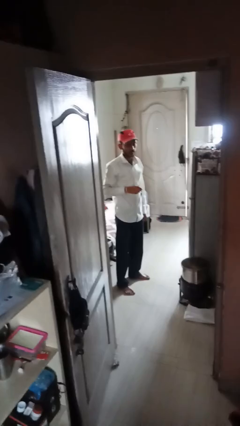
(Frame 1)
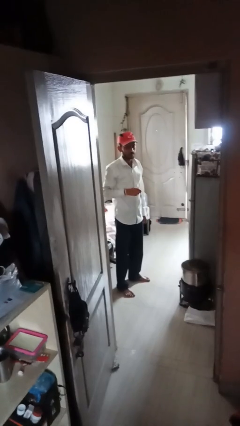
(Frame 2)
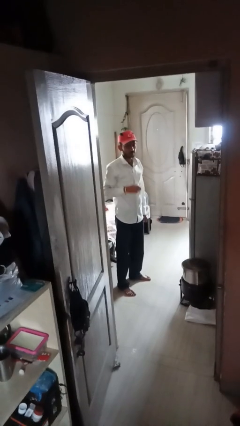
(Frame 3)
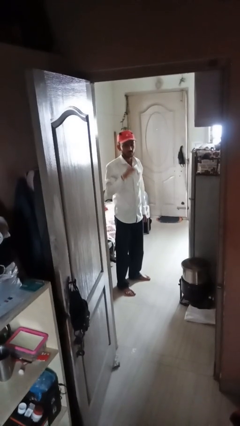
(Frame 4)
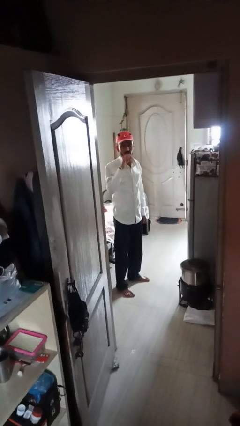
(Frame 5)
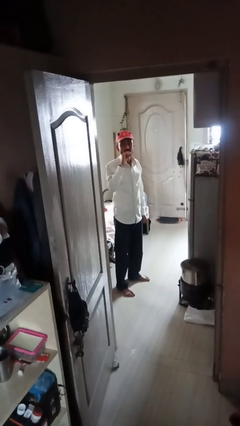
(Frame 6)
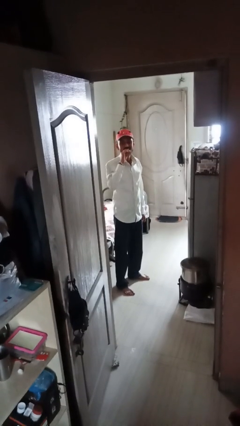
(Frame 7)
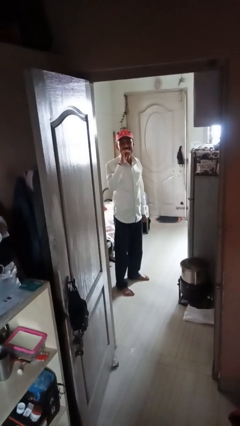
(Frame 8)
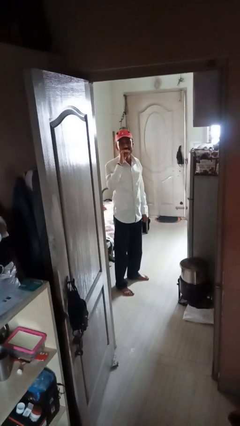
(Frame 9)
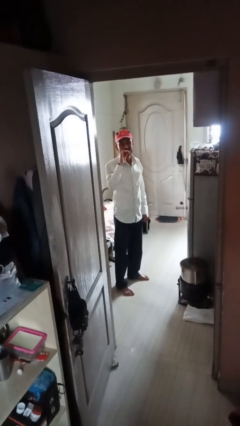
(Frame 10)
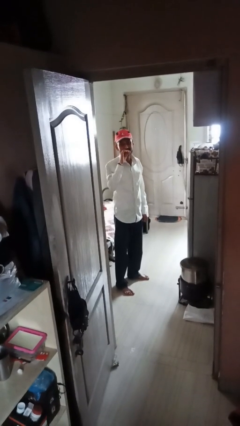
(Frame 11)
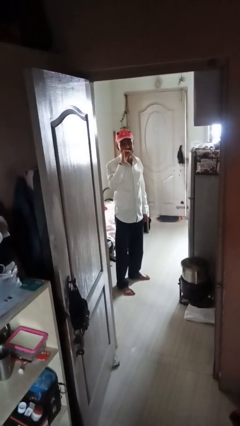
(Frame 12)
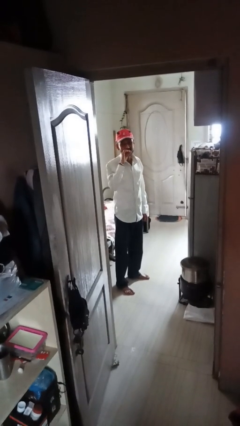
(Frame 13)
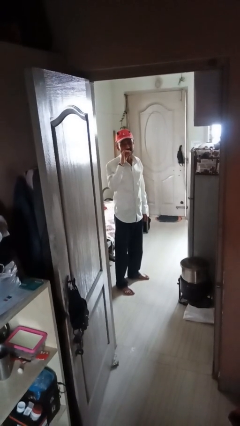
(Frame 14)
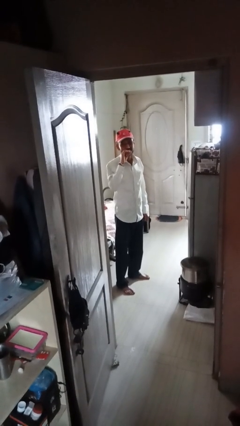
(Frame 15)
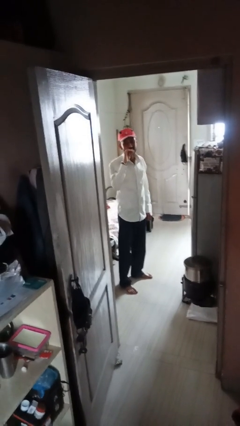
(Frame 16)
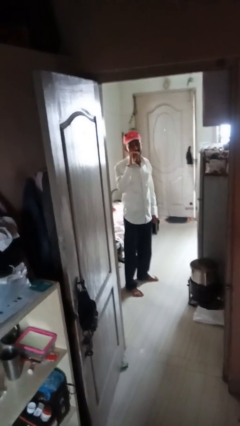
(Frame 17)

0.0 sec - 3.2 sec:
person flosses

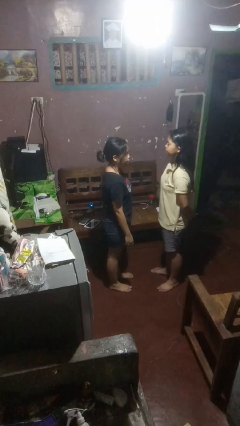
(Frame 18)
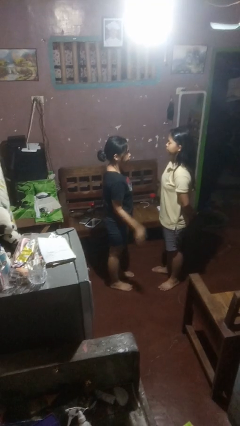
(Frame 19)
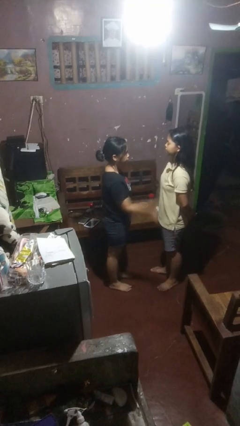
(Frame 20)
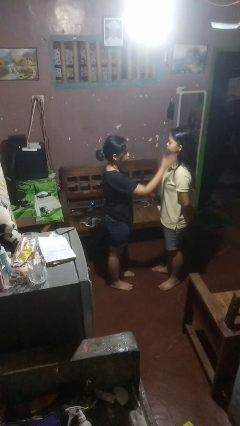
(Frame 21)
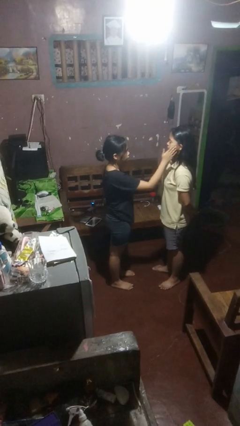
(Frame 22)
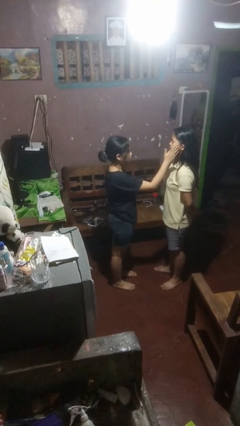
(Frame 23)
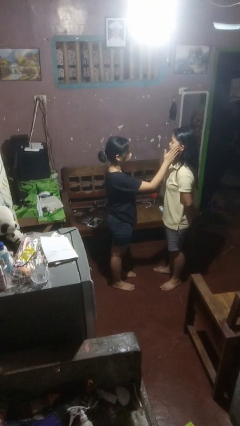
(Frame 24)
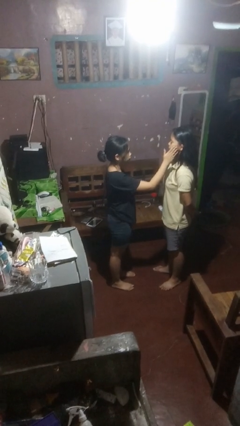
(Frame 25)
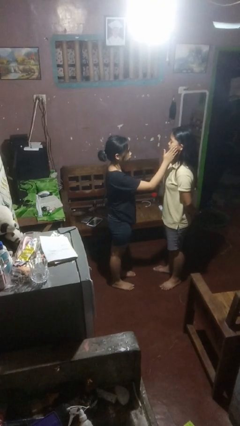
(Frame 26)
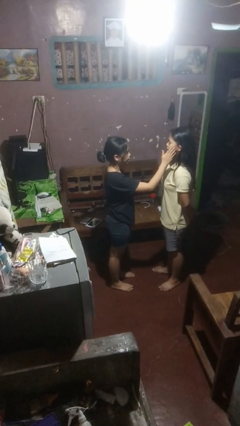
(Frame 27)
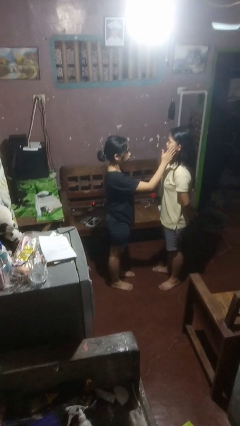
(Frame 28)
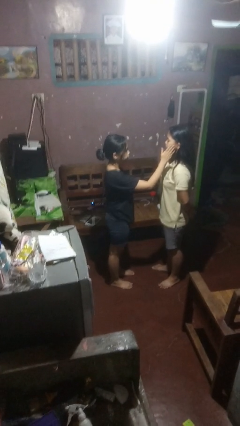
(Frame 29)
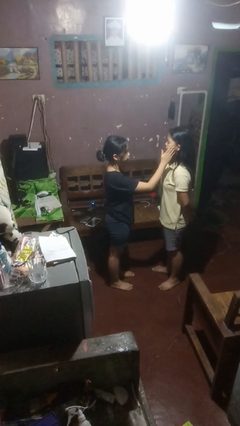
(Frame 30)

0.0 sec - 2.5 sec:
person touches face of person

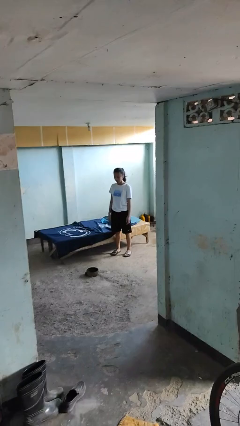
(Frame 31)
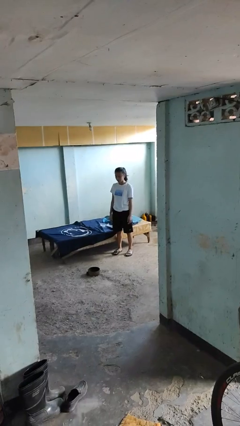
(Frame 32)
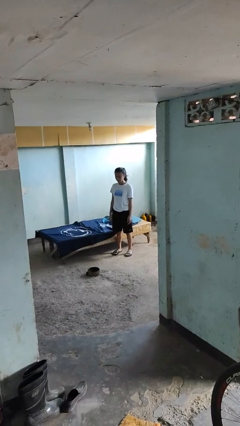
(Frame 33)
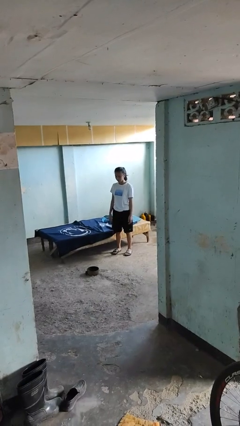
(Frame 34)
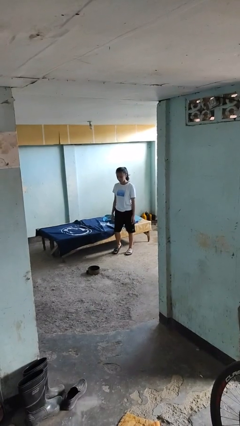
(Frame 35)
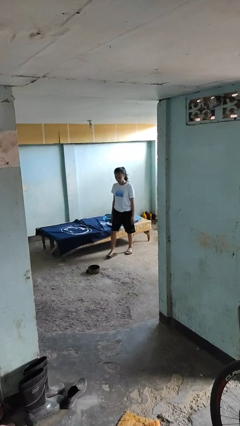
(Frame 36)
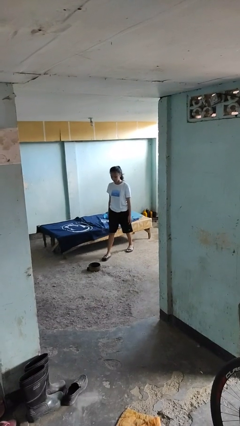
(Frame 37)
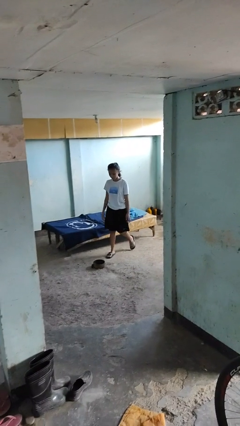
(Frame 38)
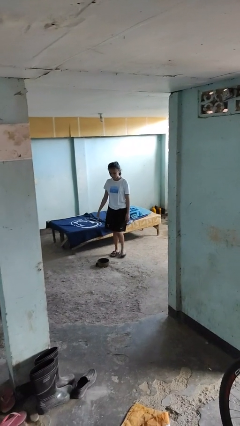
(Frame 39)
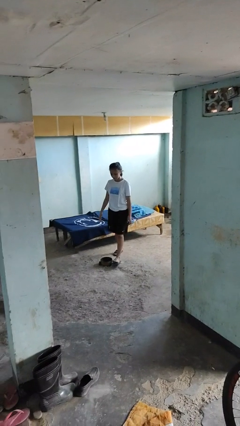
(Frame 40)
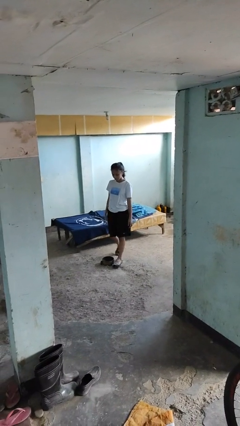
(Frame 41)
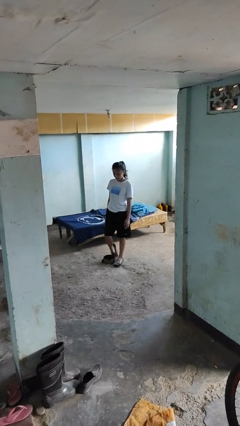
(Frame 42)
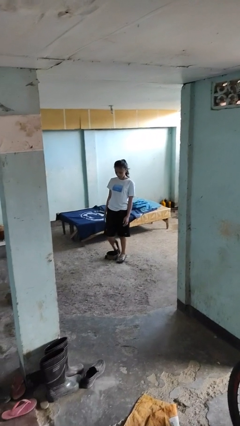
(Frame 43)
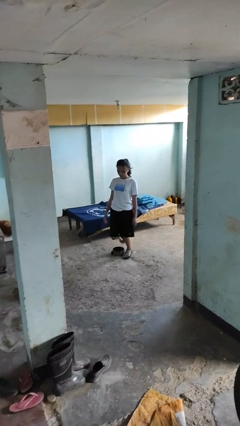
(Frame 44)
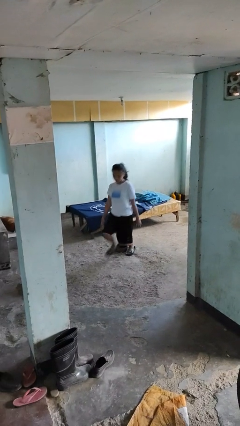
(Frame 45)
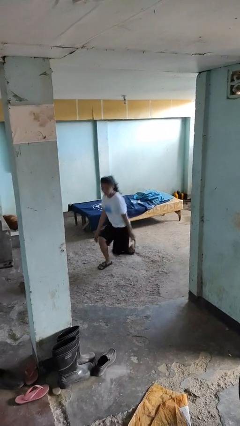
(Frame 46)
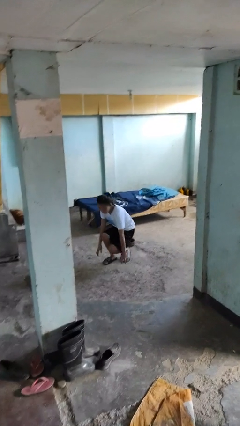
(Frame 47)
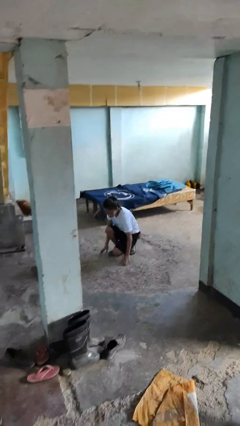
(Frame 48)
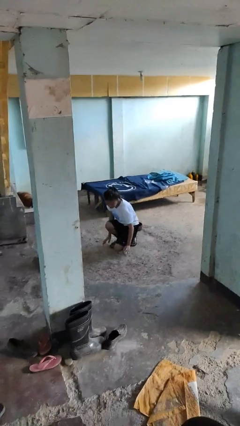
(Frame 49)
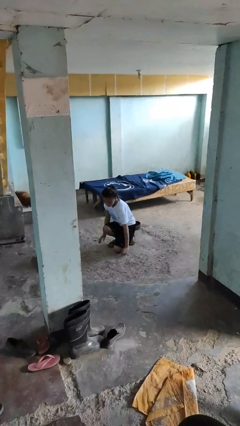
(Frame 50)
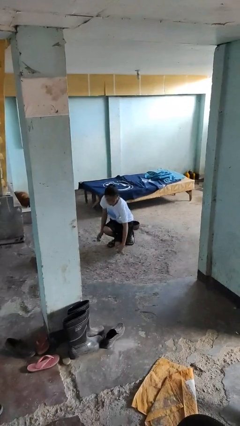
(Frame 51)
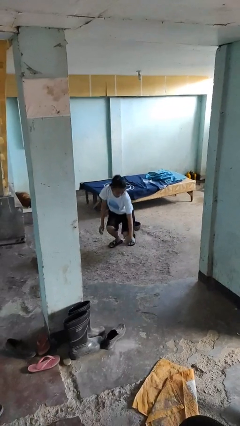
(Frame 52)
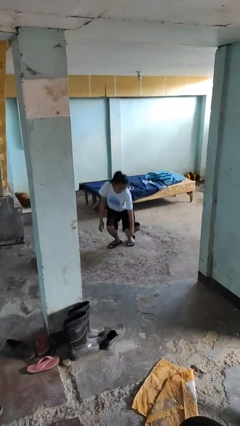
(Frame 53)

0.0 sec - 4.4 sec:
person trips on object on floor

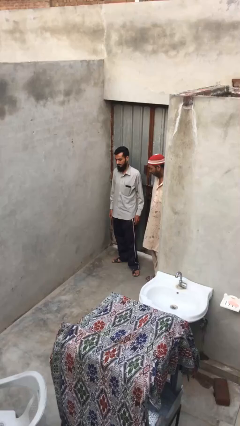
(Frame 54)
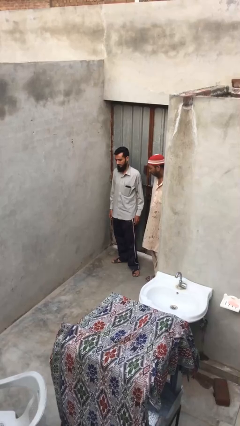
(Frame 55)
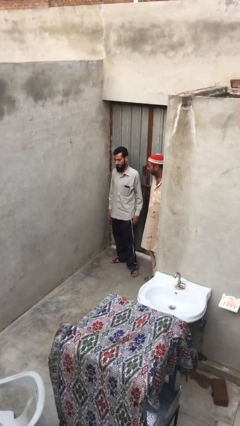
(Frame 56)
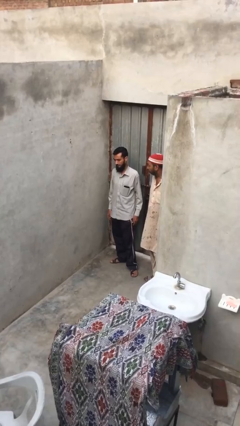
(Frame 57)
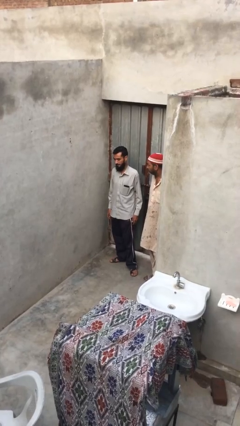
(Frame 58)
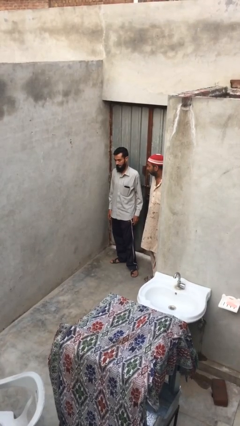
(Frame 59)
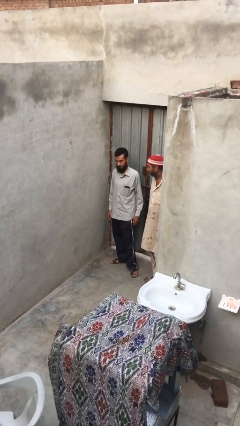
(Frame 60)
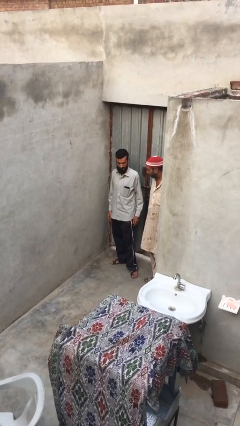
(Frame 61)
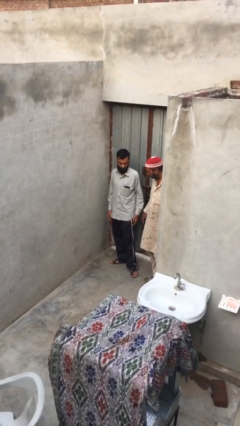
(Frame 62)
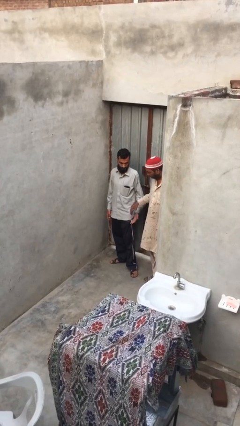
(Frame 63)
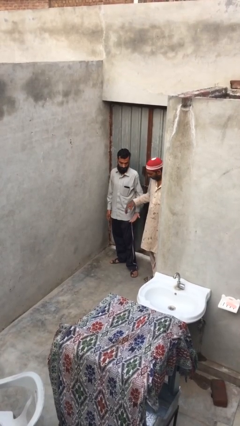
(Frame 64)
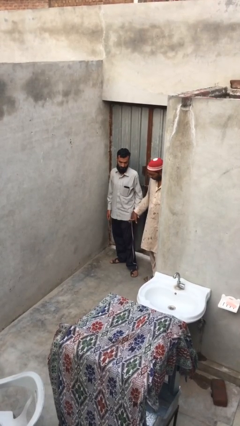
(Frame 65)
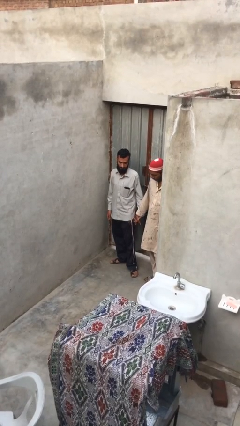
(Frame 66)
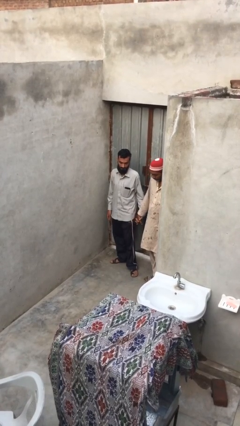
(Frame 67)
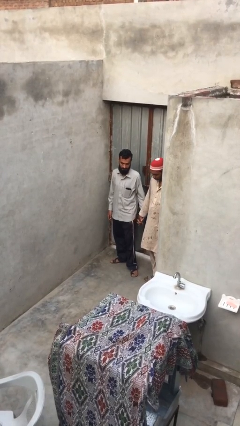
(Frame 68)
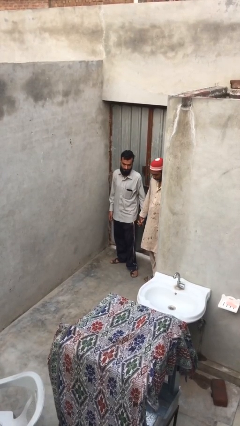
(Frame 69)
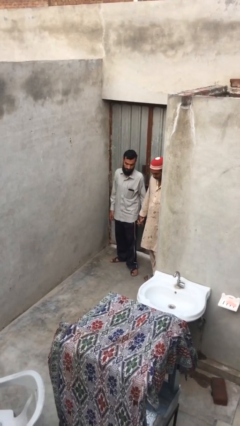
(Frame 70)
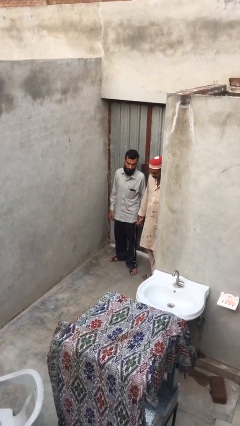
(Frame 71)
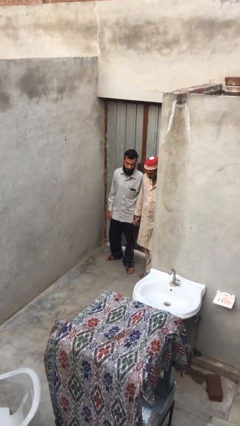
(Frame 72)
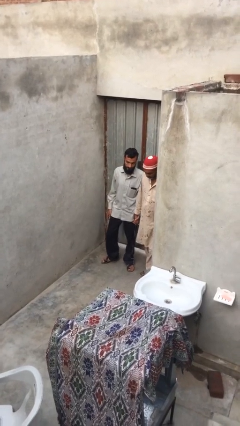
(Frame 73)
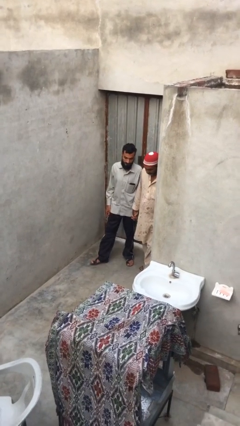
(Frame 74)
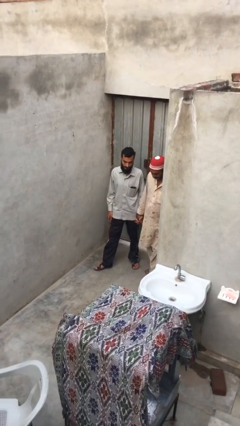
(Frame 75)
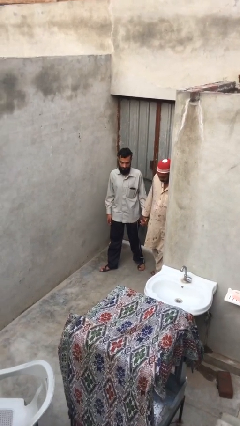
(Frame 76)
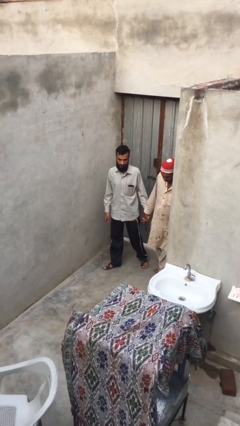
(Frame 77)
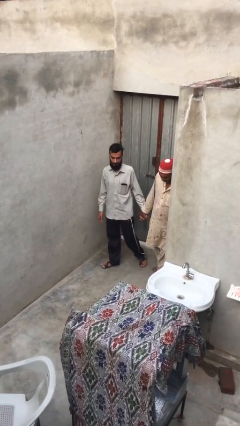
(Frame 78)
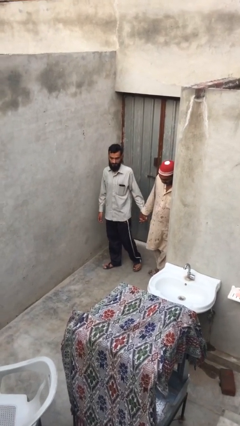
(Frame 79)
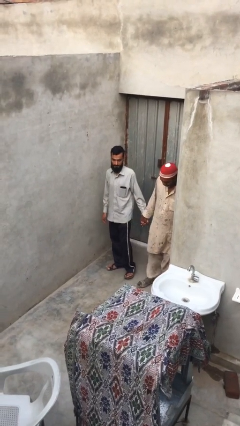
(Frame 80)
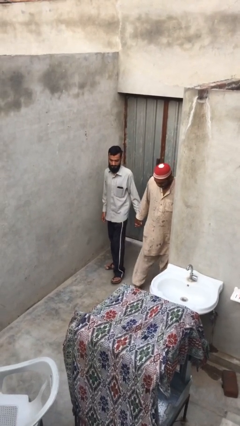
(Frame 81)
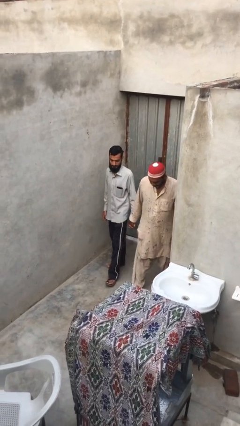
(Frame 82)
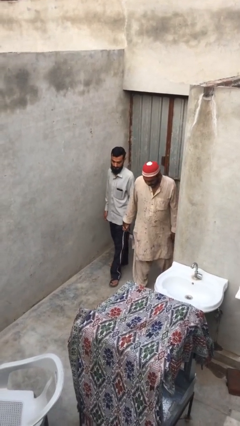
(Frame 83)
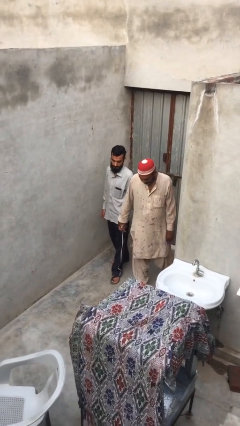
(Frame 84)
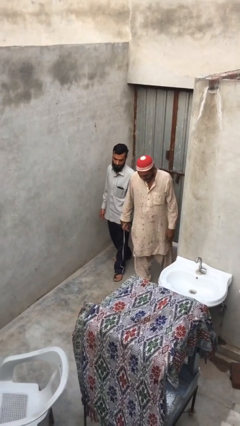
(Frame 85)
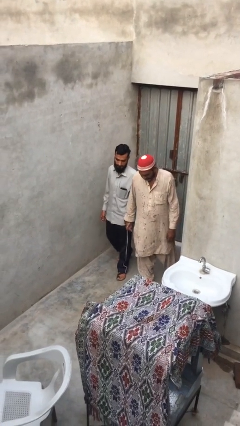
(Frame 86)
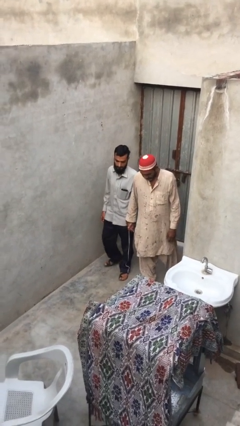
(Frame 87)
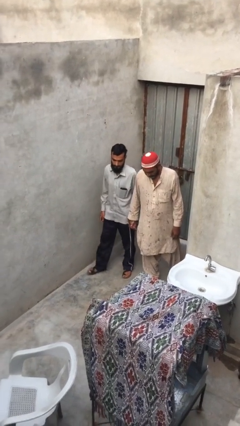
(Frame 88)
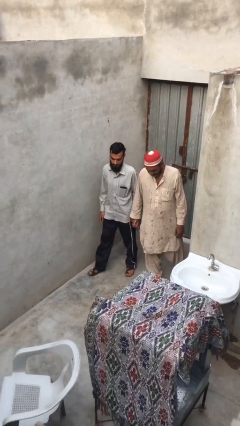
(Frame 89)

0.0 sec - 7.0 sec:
person holds hand

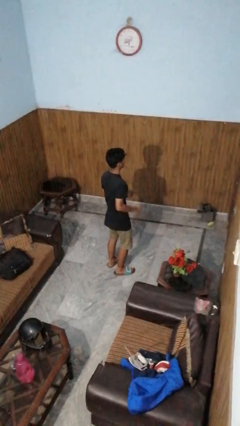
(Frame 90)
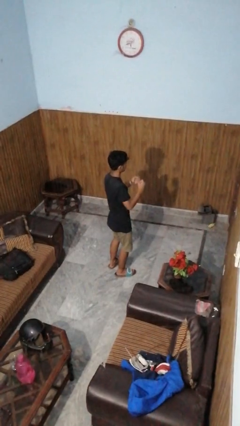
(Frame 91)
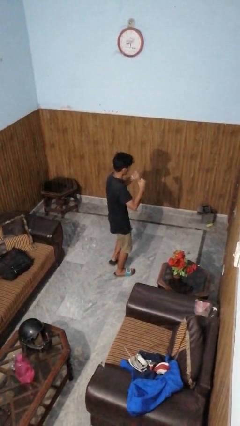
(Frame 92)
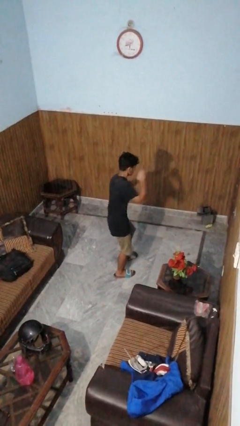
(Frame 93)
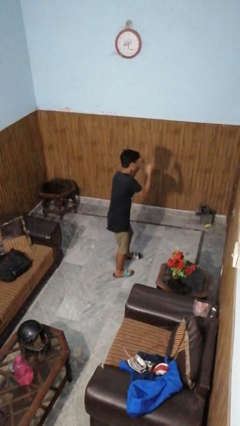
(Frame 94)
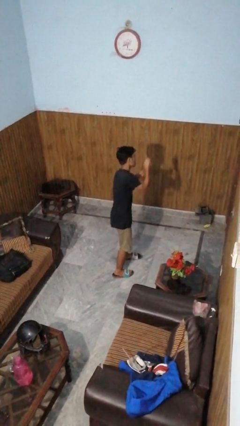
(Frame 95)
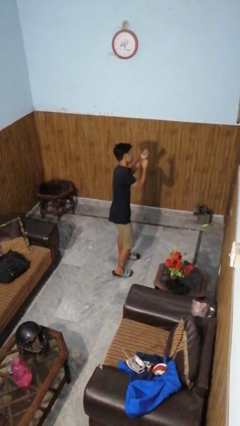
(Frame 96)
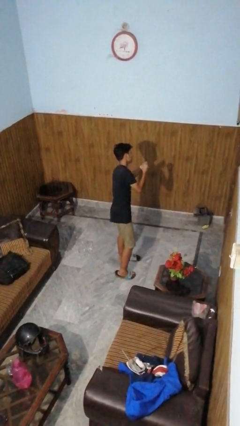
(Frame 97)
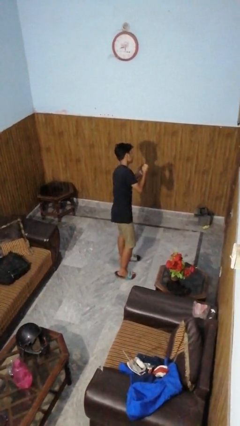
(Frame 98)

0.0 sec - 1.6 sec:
person punches
